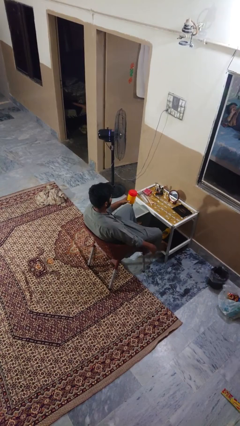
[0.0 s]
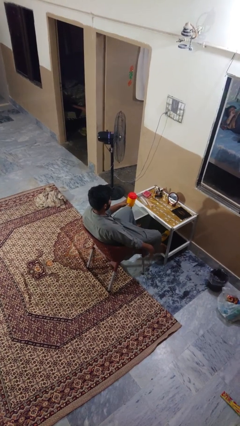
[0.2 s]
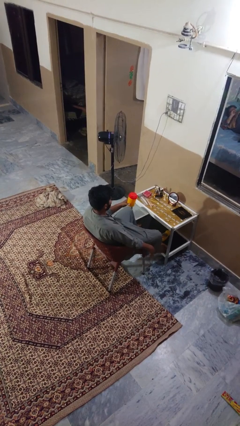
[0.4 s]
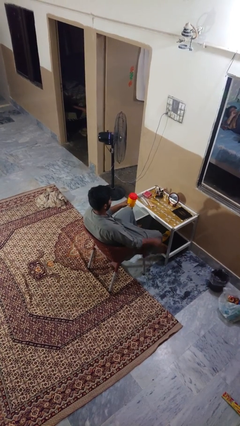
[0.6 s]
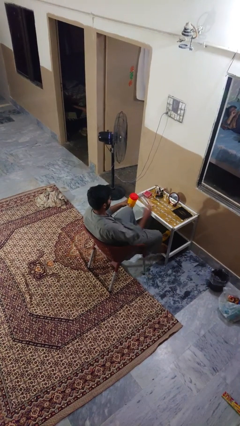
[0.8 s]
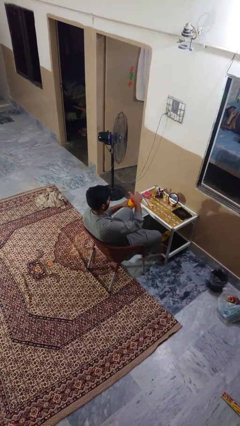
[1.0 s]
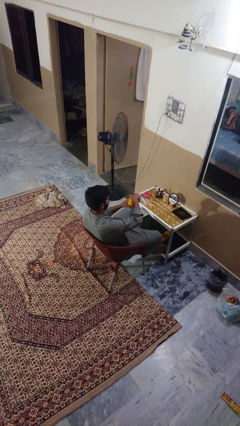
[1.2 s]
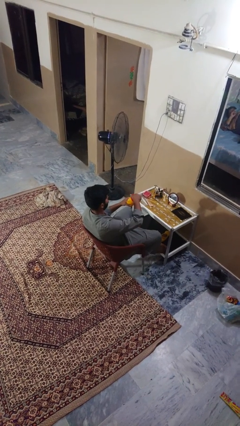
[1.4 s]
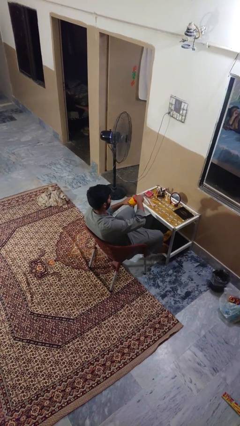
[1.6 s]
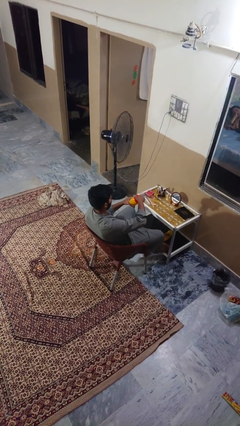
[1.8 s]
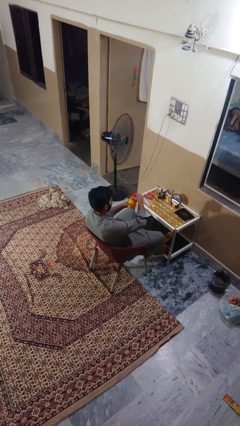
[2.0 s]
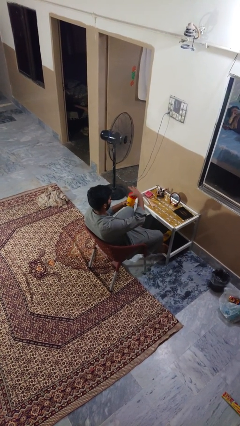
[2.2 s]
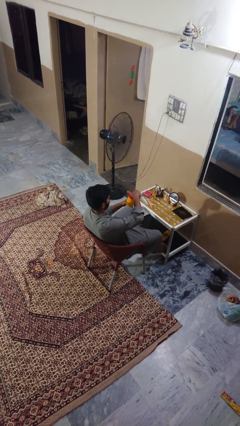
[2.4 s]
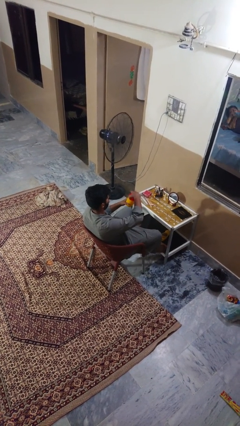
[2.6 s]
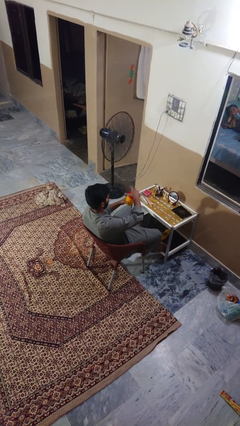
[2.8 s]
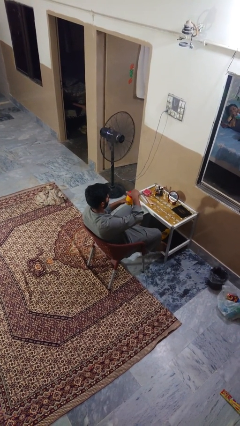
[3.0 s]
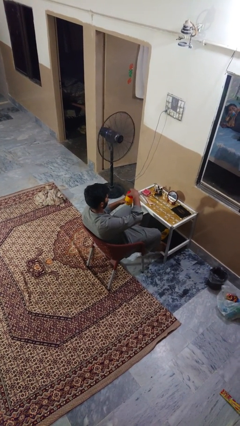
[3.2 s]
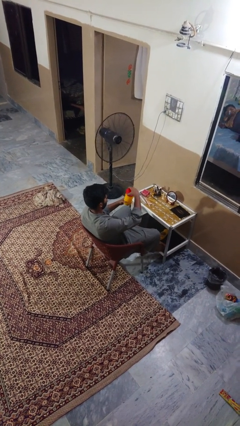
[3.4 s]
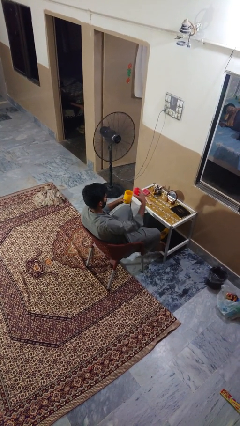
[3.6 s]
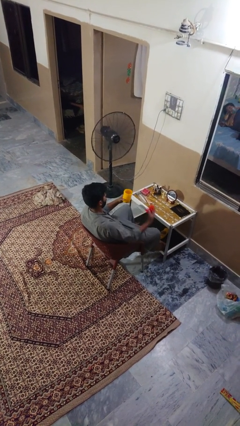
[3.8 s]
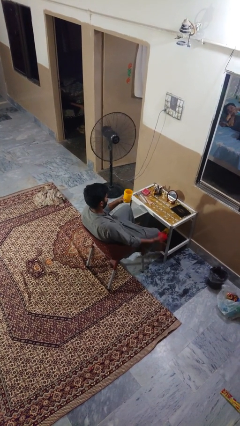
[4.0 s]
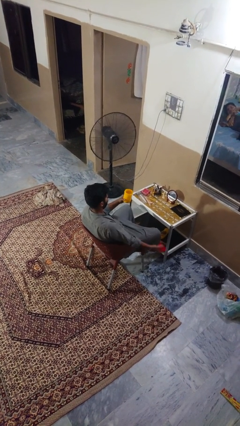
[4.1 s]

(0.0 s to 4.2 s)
person opens jar

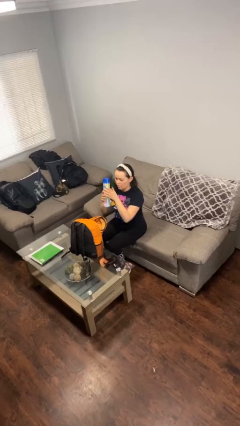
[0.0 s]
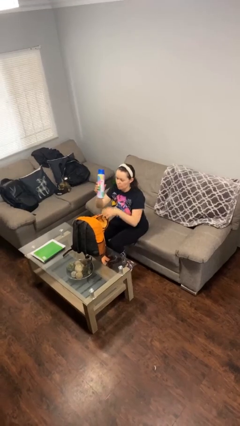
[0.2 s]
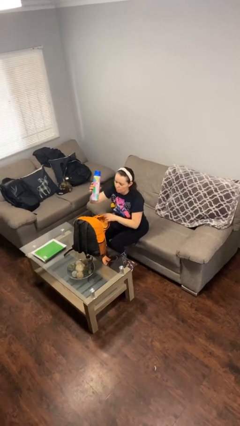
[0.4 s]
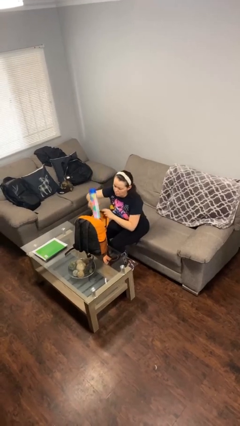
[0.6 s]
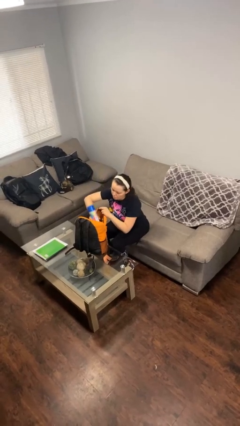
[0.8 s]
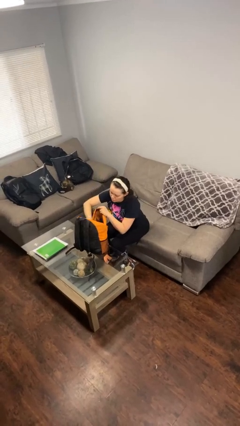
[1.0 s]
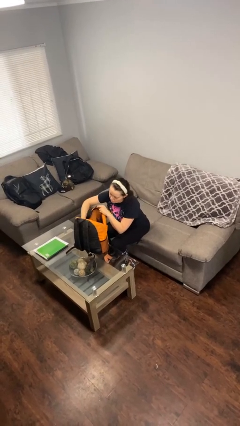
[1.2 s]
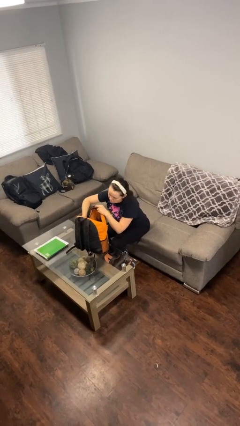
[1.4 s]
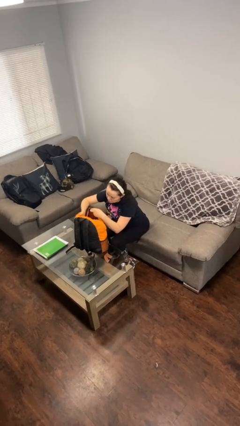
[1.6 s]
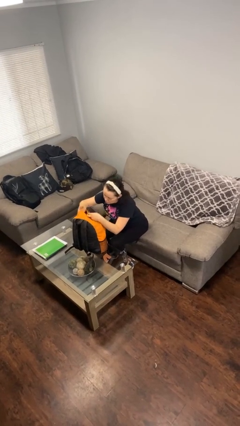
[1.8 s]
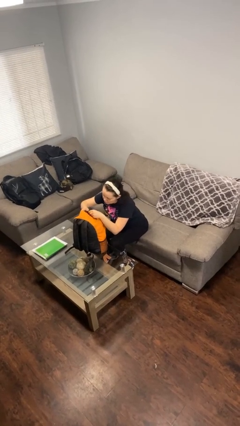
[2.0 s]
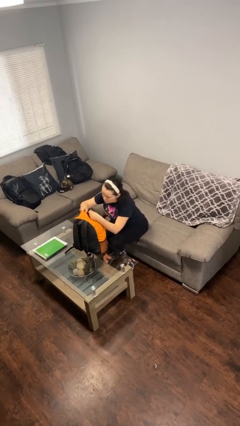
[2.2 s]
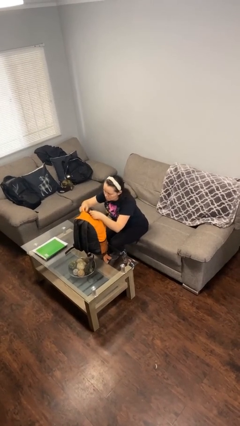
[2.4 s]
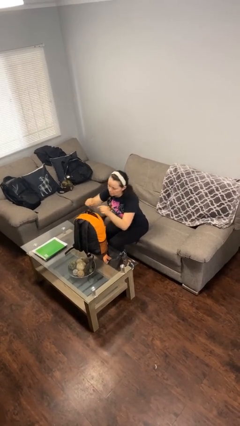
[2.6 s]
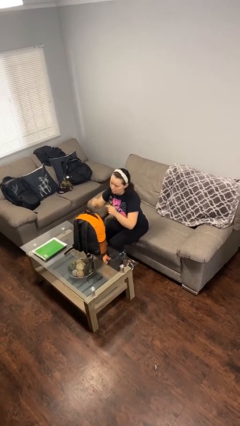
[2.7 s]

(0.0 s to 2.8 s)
person puts object into backpack

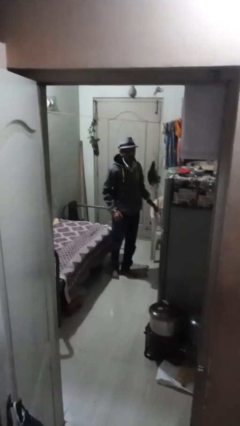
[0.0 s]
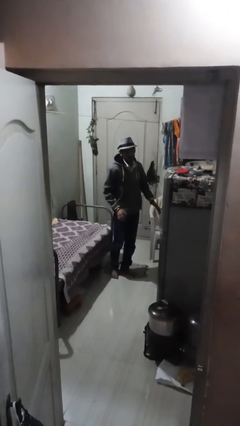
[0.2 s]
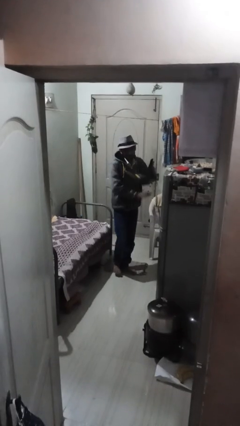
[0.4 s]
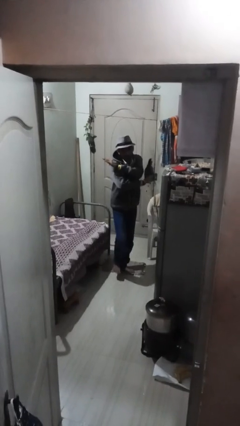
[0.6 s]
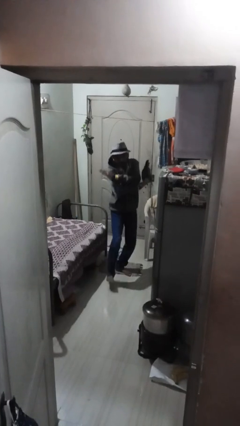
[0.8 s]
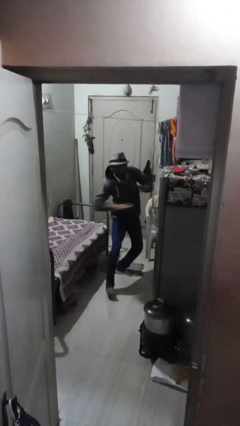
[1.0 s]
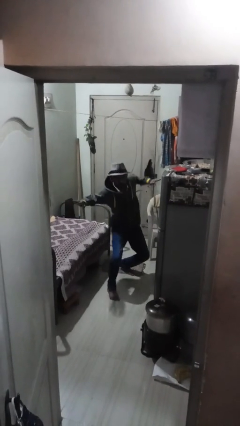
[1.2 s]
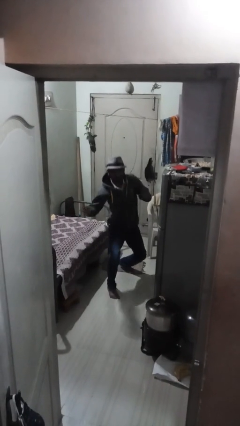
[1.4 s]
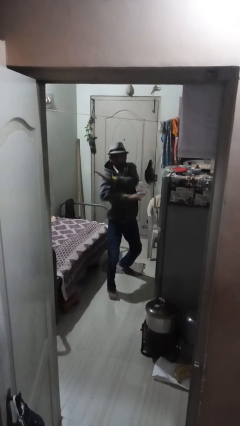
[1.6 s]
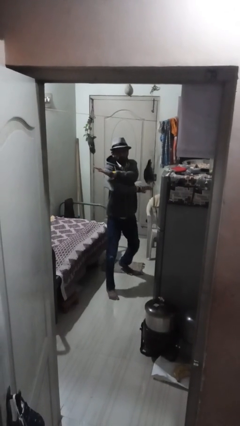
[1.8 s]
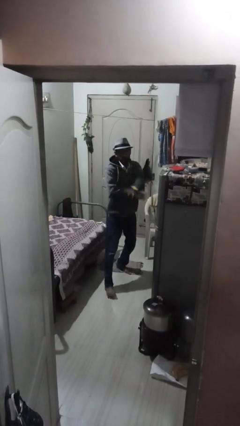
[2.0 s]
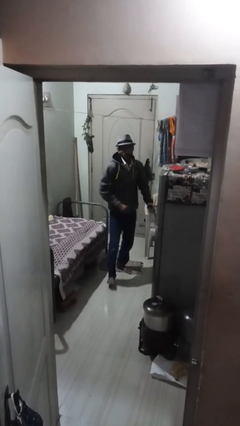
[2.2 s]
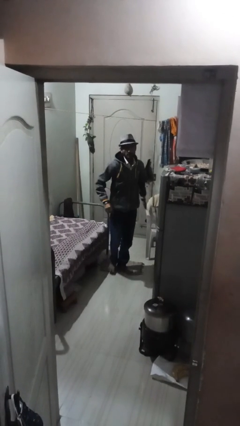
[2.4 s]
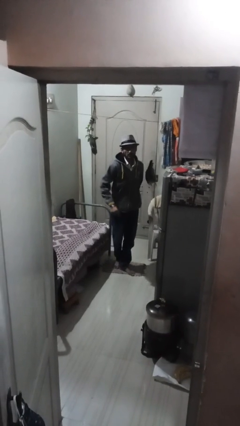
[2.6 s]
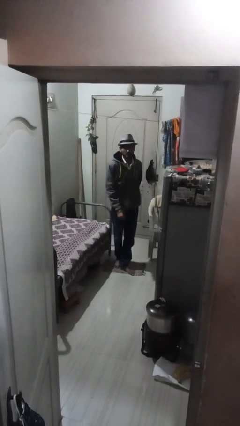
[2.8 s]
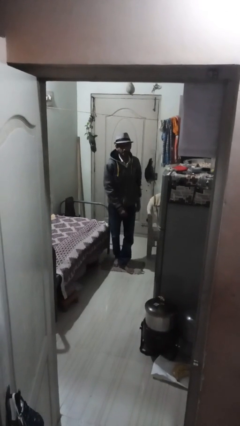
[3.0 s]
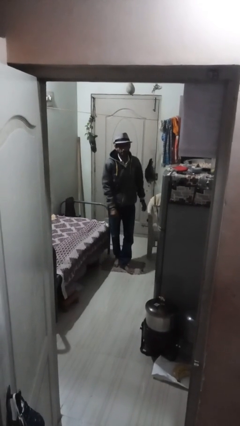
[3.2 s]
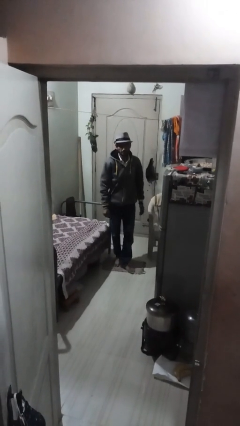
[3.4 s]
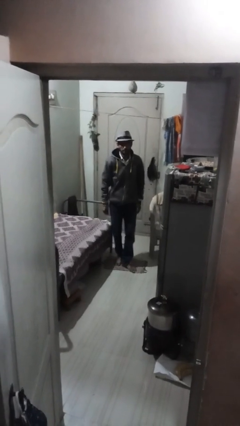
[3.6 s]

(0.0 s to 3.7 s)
person karate chop

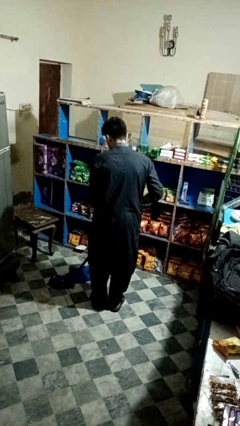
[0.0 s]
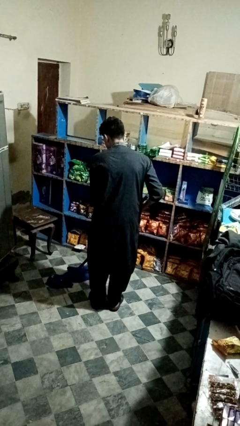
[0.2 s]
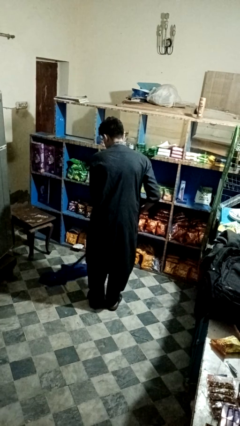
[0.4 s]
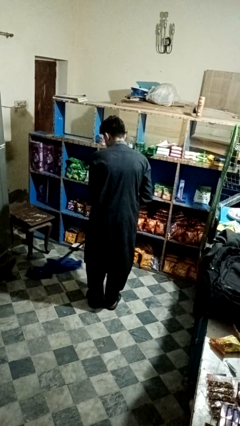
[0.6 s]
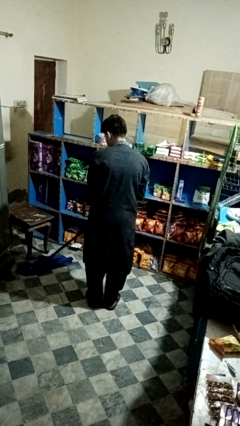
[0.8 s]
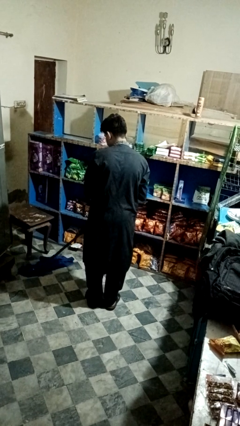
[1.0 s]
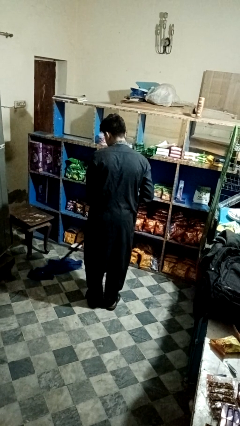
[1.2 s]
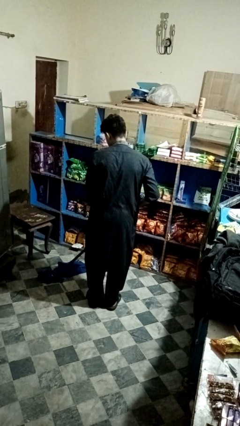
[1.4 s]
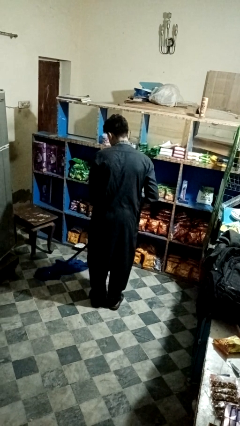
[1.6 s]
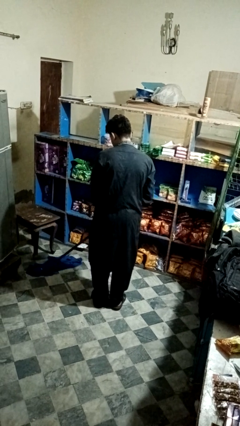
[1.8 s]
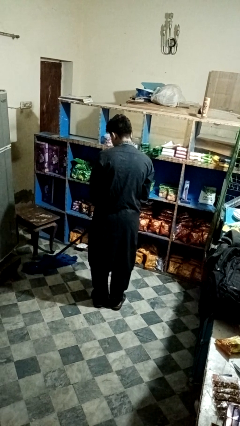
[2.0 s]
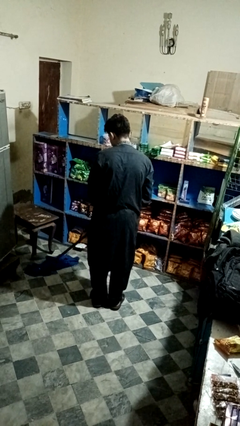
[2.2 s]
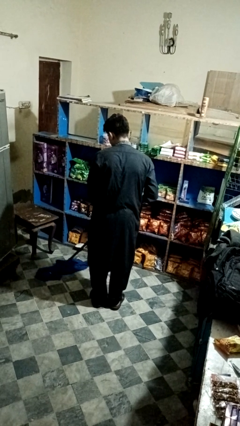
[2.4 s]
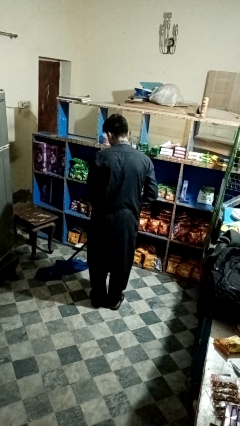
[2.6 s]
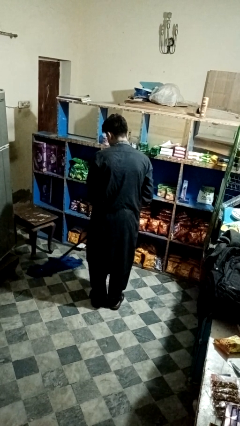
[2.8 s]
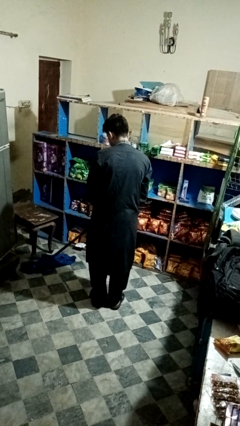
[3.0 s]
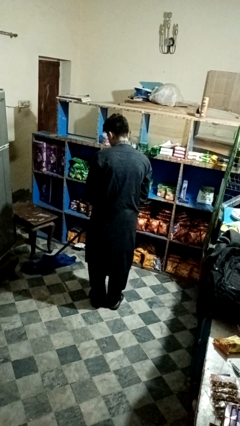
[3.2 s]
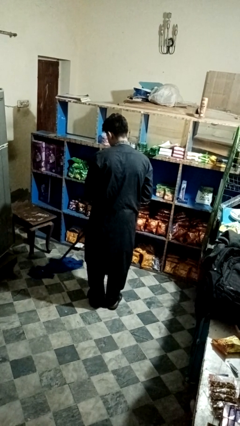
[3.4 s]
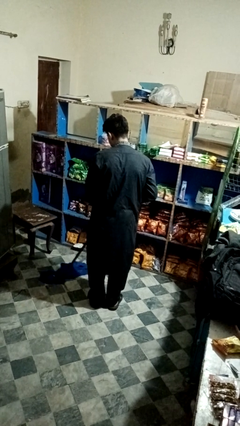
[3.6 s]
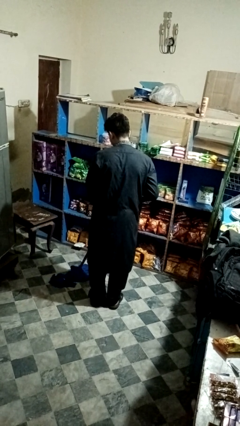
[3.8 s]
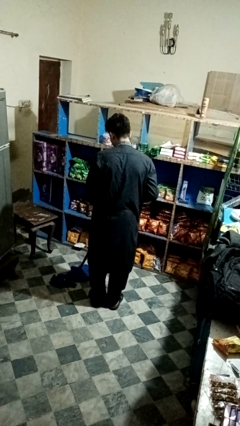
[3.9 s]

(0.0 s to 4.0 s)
person mops

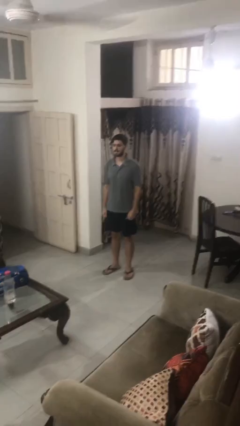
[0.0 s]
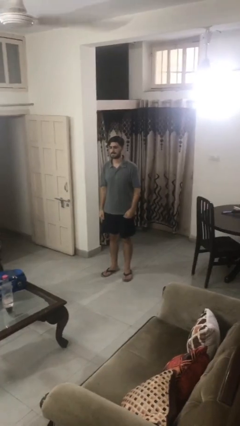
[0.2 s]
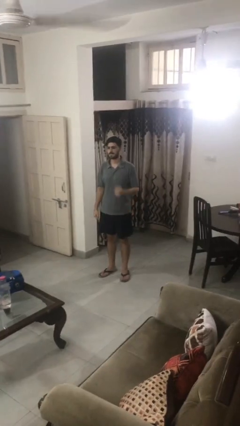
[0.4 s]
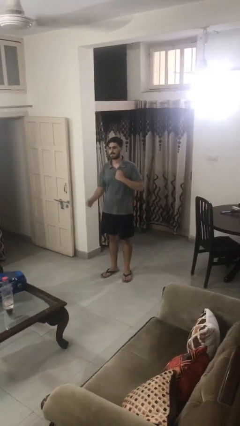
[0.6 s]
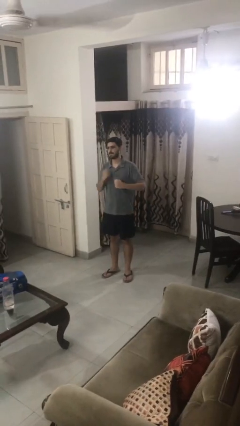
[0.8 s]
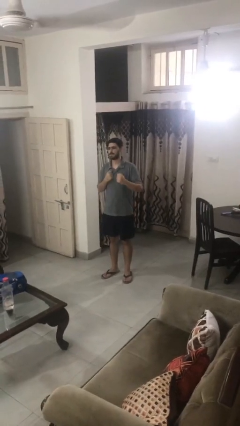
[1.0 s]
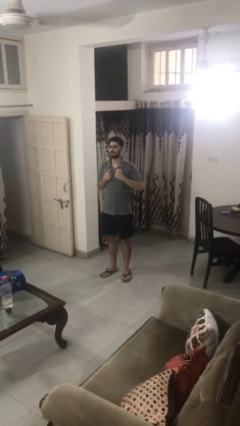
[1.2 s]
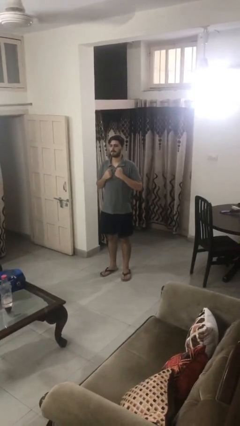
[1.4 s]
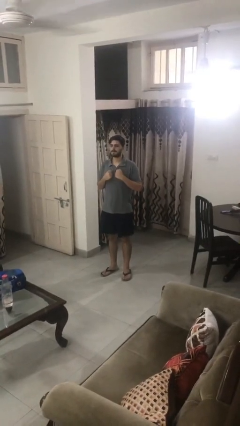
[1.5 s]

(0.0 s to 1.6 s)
person drums on chest

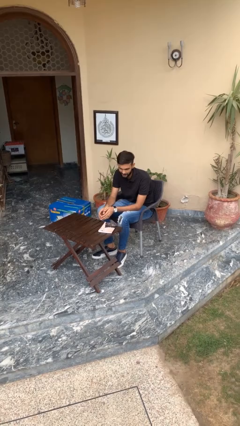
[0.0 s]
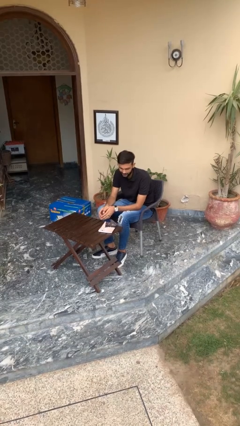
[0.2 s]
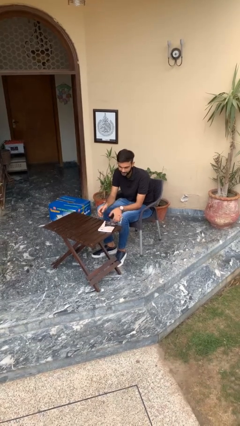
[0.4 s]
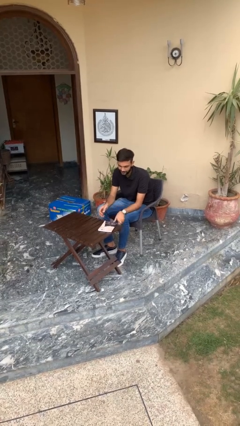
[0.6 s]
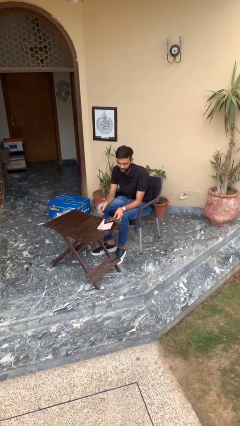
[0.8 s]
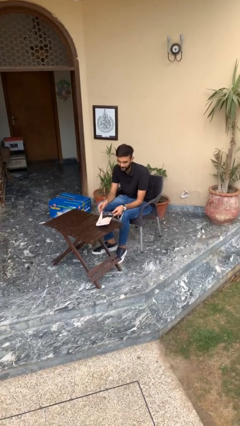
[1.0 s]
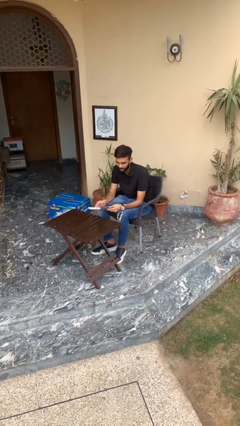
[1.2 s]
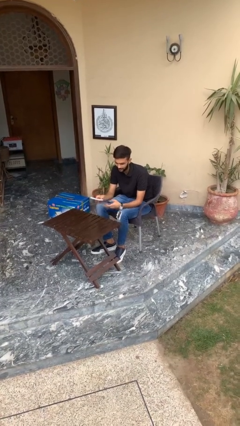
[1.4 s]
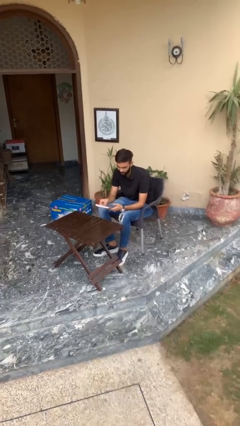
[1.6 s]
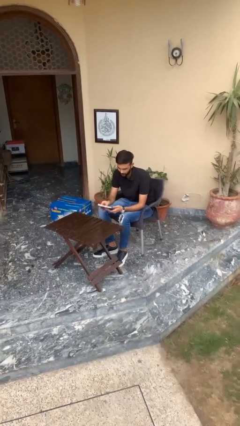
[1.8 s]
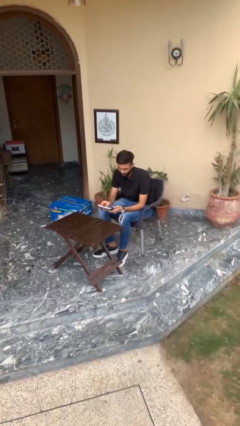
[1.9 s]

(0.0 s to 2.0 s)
person picks up object from table
